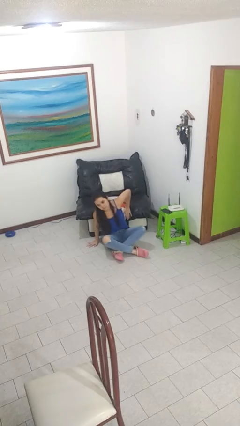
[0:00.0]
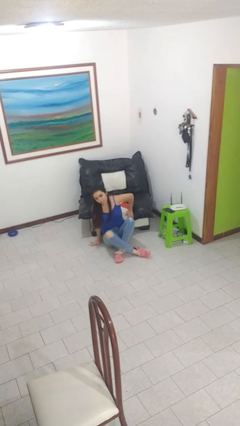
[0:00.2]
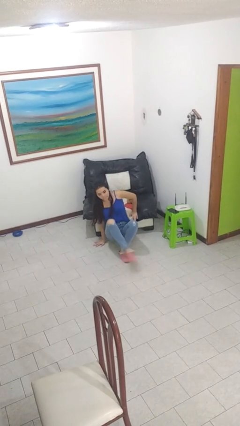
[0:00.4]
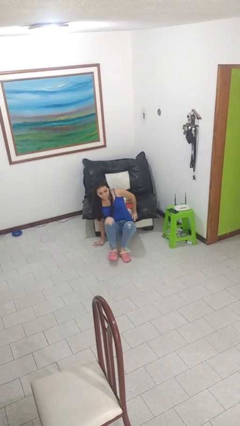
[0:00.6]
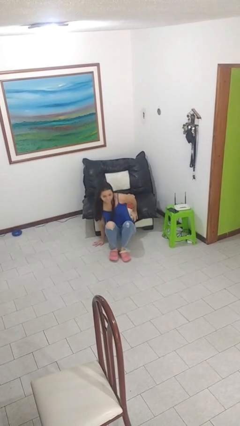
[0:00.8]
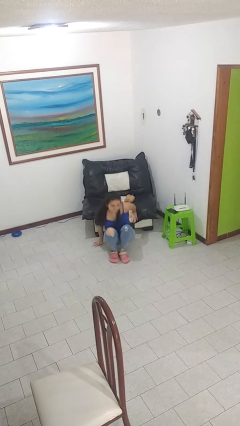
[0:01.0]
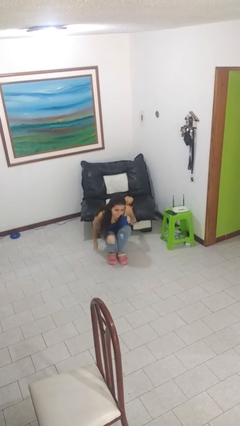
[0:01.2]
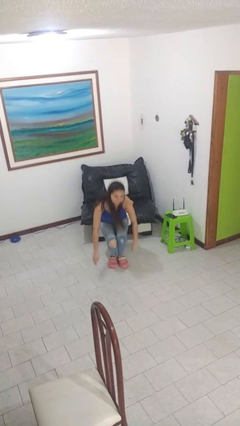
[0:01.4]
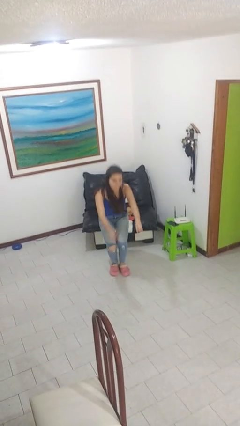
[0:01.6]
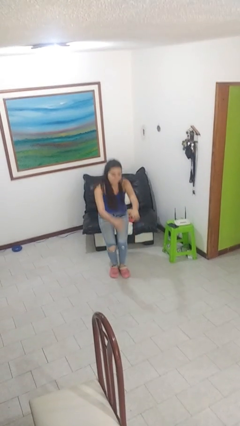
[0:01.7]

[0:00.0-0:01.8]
person stands up from floor

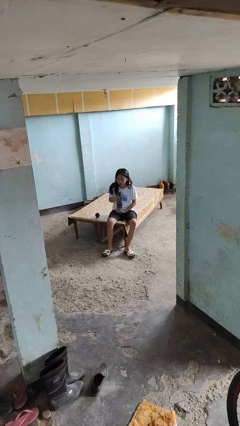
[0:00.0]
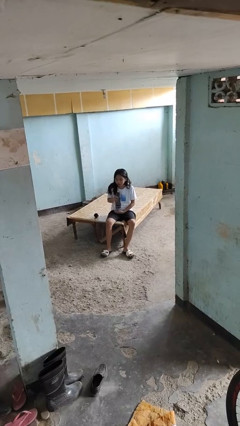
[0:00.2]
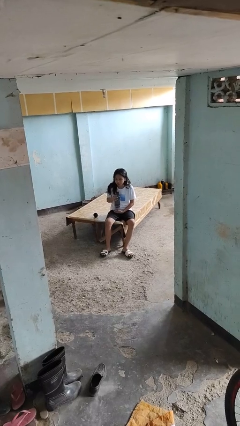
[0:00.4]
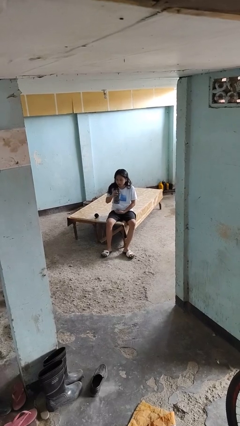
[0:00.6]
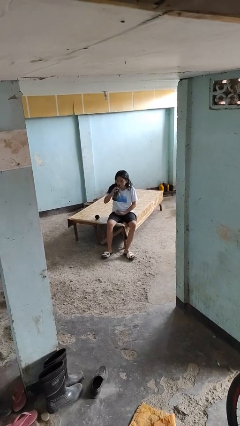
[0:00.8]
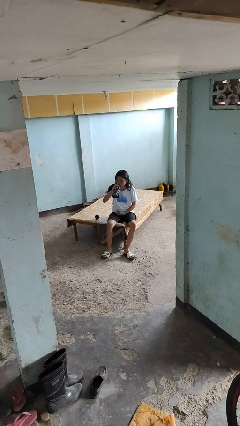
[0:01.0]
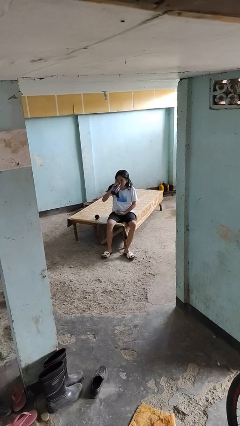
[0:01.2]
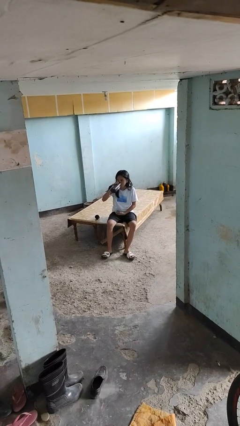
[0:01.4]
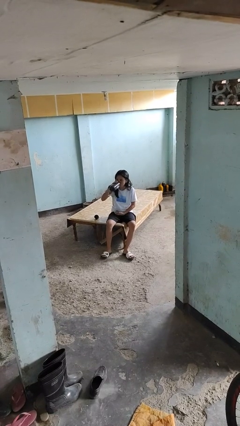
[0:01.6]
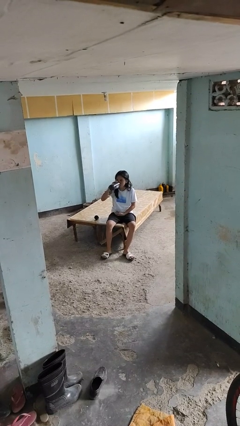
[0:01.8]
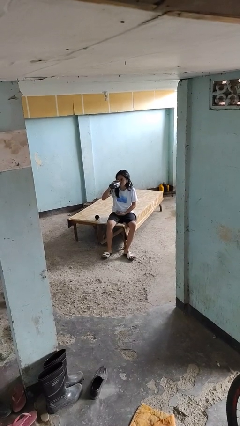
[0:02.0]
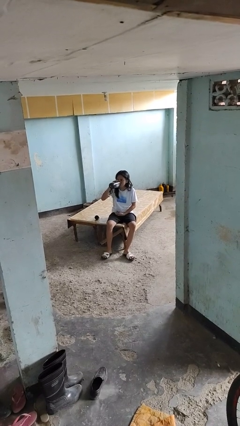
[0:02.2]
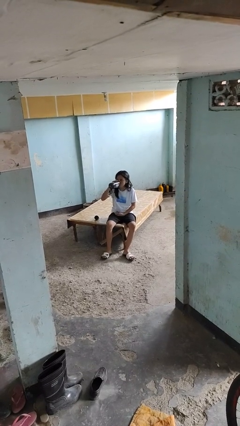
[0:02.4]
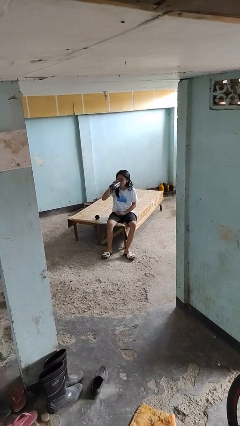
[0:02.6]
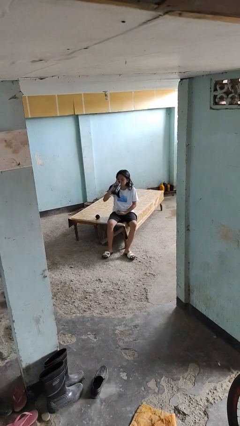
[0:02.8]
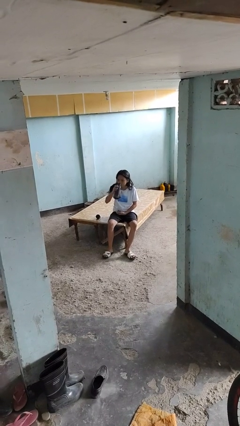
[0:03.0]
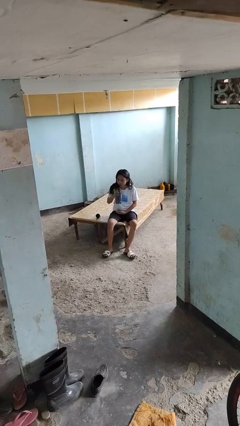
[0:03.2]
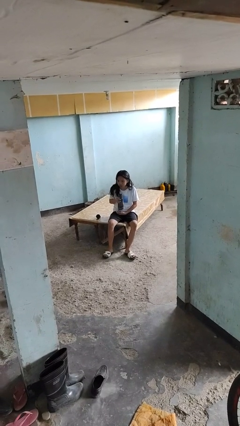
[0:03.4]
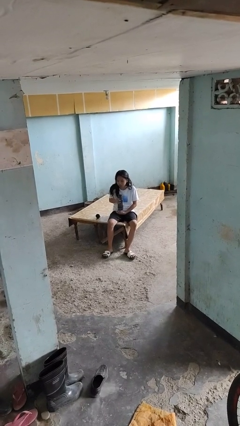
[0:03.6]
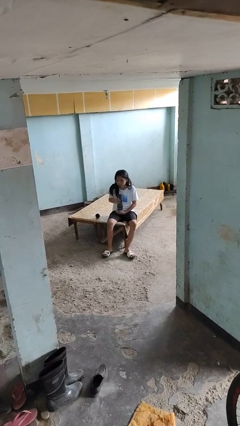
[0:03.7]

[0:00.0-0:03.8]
person drinks from bottle

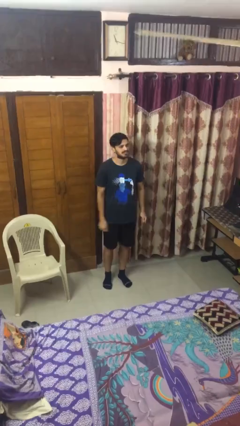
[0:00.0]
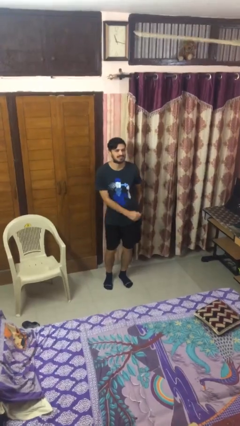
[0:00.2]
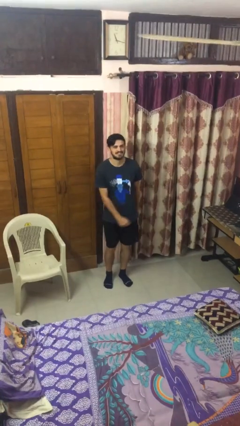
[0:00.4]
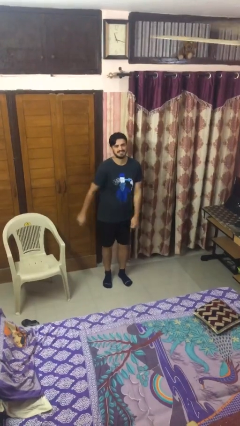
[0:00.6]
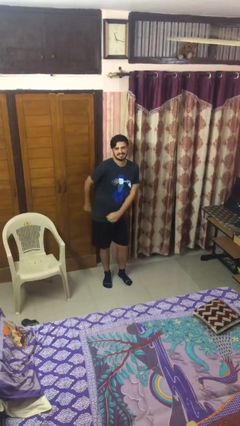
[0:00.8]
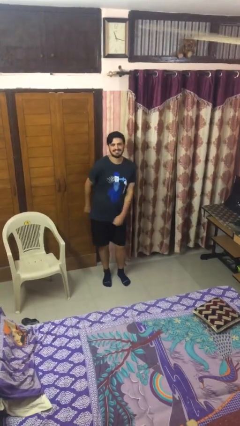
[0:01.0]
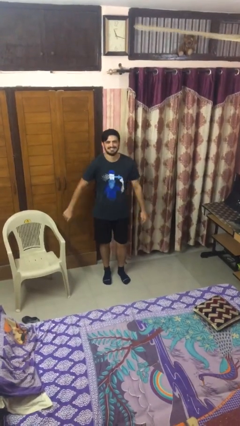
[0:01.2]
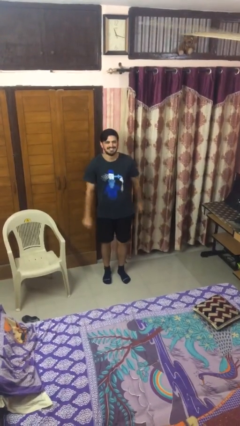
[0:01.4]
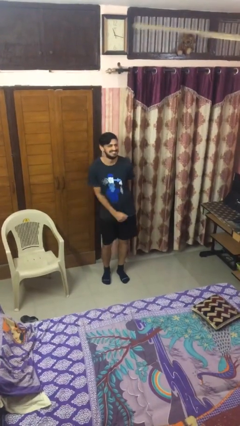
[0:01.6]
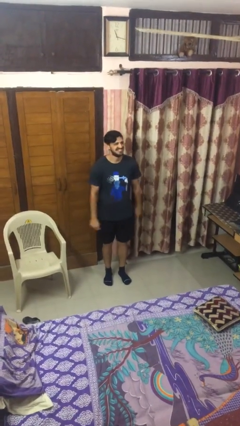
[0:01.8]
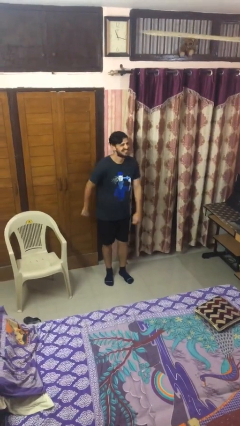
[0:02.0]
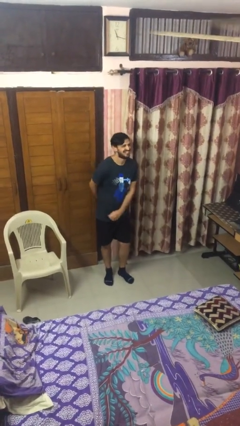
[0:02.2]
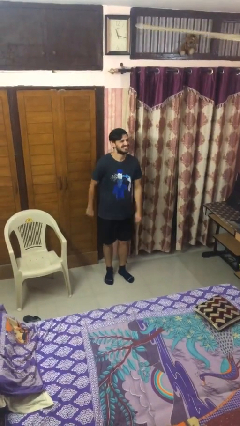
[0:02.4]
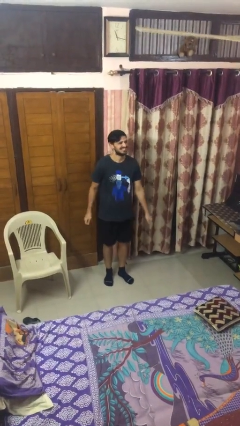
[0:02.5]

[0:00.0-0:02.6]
person dances in place

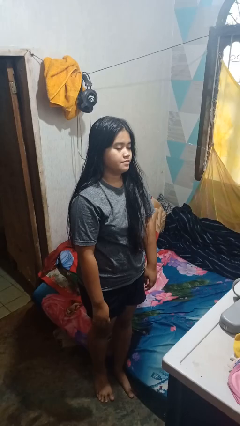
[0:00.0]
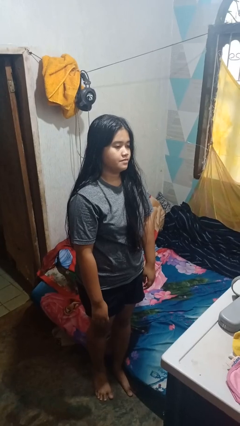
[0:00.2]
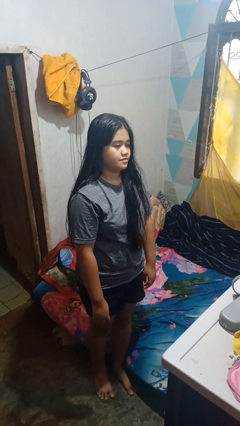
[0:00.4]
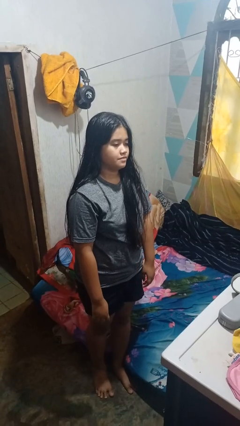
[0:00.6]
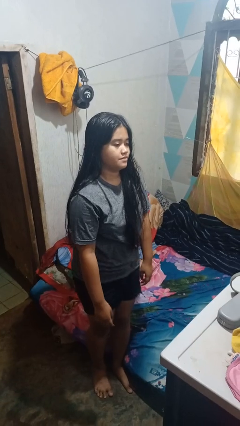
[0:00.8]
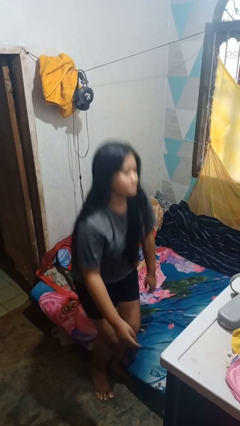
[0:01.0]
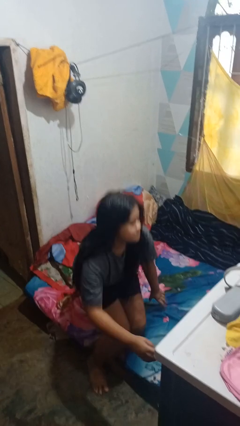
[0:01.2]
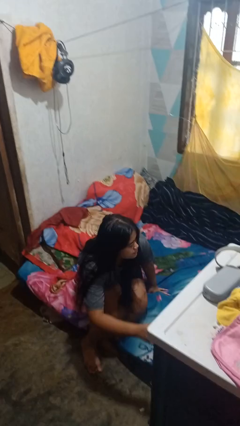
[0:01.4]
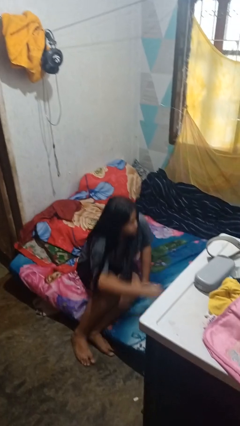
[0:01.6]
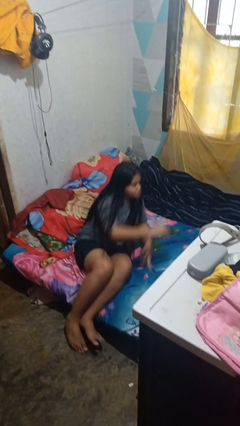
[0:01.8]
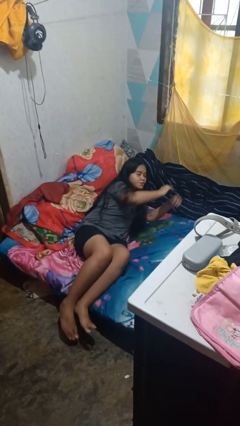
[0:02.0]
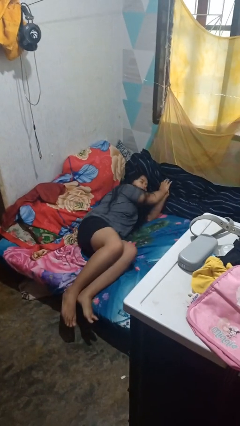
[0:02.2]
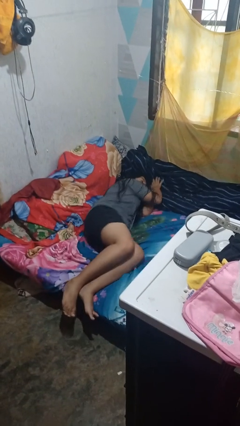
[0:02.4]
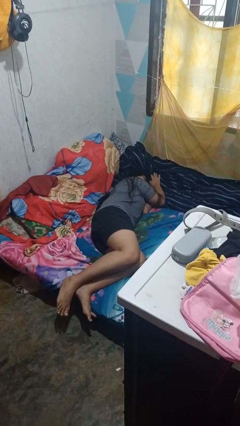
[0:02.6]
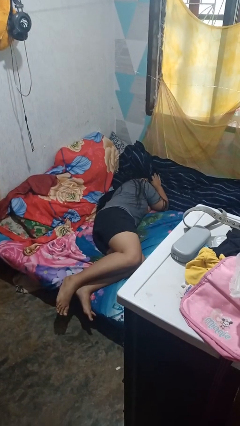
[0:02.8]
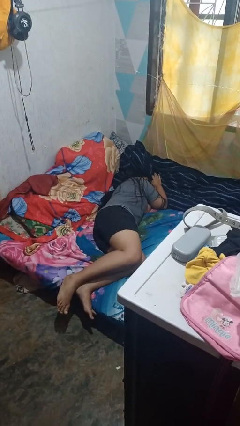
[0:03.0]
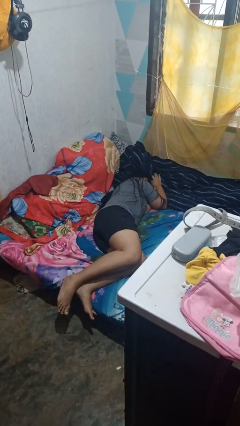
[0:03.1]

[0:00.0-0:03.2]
person lies down on bed

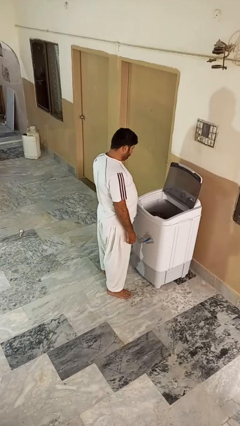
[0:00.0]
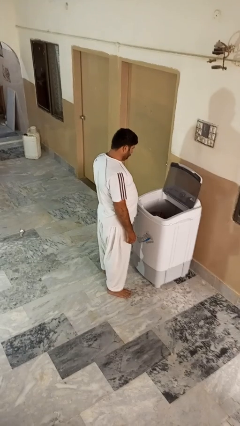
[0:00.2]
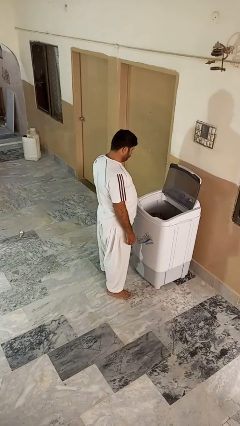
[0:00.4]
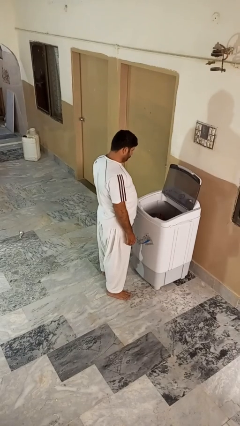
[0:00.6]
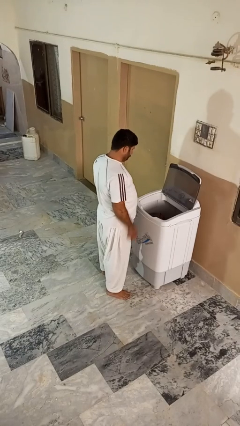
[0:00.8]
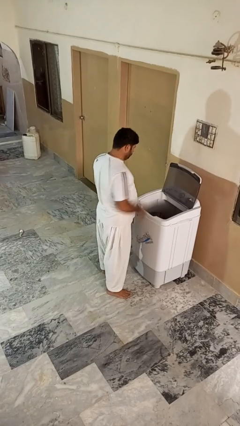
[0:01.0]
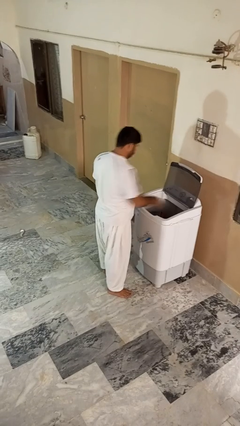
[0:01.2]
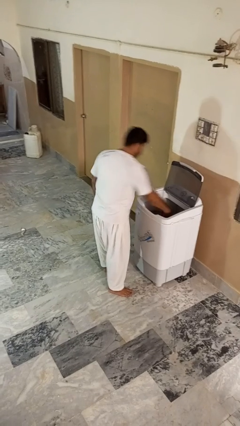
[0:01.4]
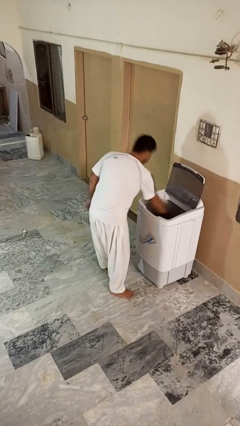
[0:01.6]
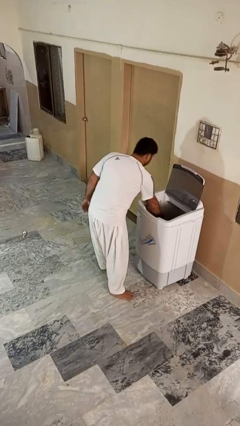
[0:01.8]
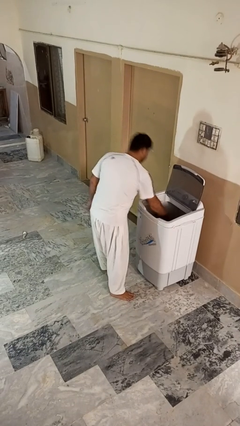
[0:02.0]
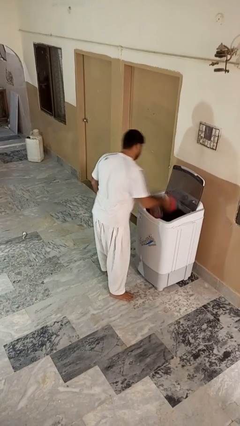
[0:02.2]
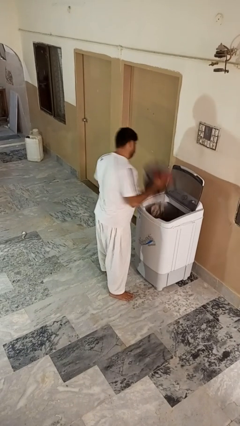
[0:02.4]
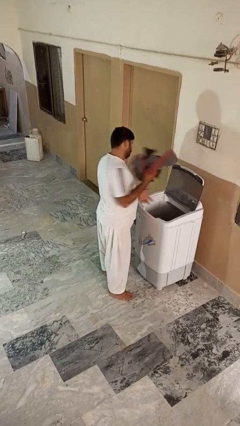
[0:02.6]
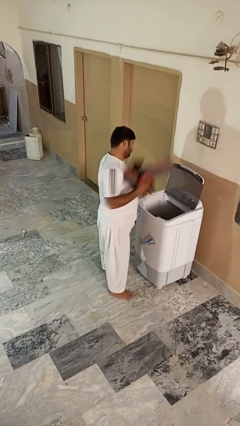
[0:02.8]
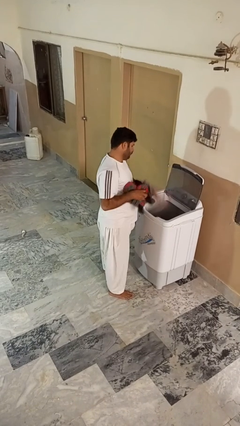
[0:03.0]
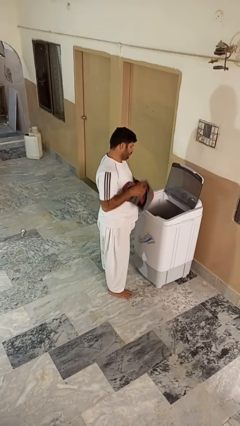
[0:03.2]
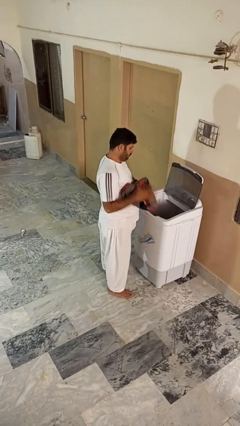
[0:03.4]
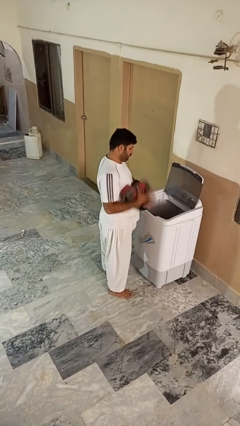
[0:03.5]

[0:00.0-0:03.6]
person unloads clotheswasher

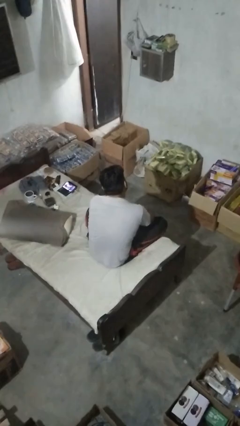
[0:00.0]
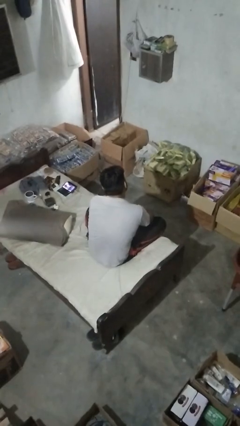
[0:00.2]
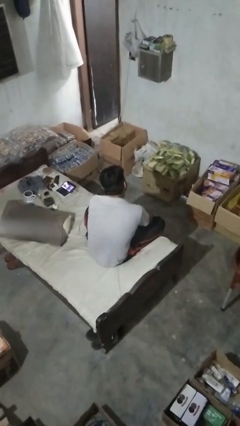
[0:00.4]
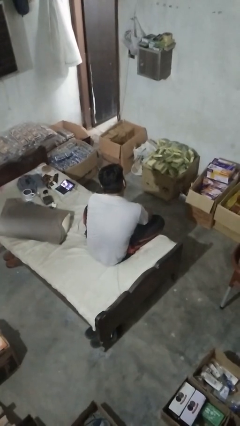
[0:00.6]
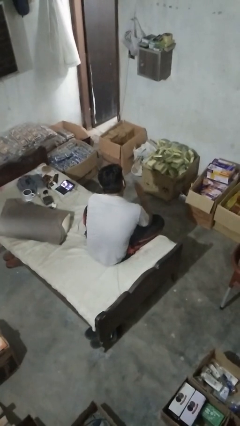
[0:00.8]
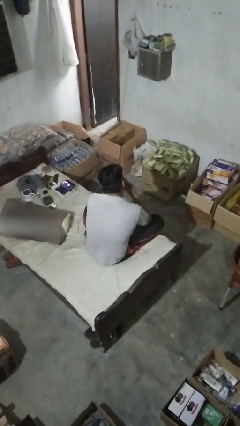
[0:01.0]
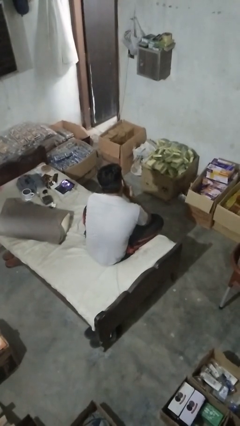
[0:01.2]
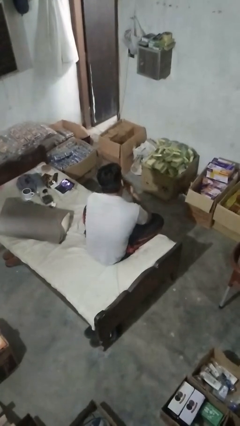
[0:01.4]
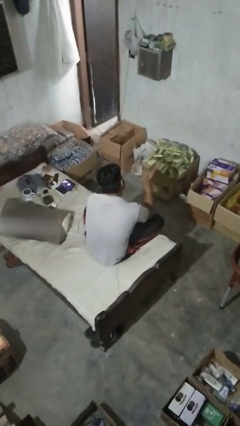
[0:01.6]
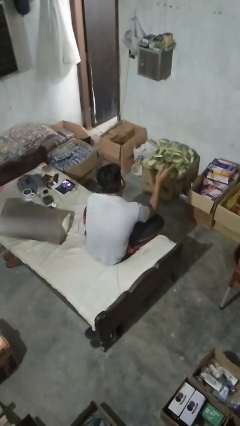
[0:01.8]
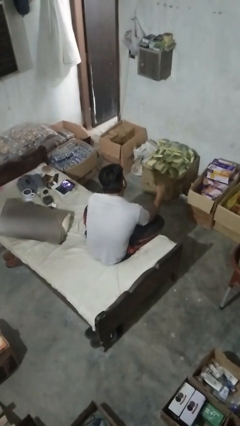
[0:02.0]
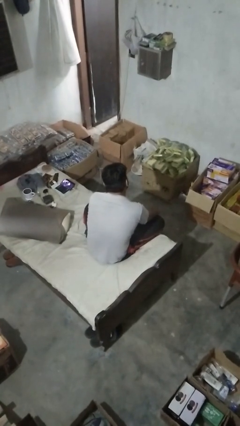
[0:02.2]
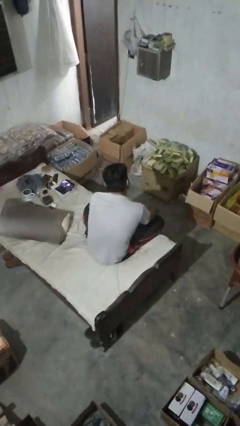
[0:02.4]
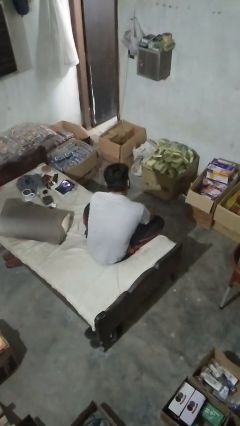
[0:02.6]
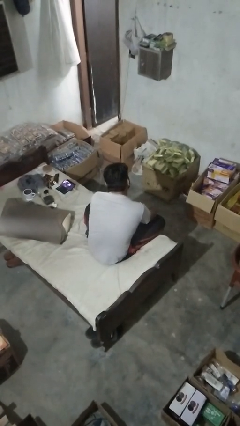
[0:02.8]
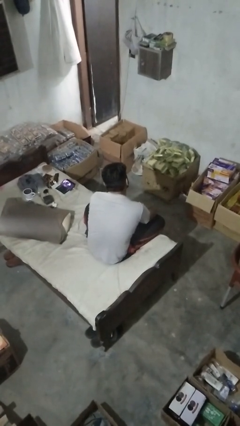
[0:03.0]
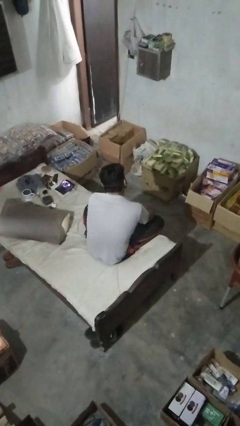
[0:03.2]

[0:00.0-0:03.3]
person gestures blow kiss
